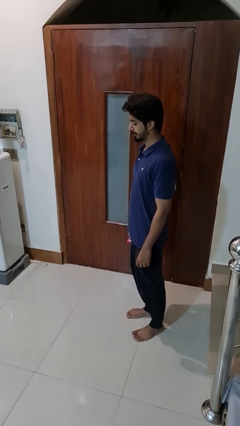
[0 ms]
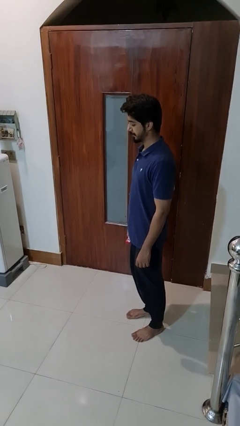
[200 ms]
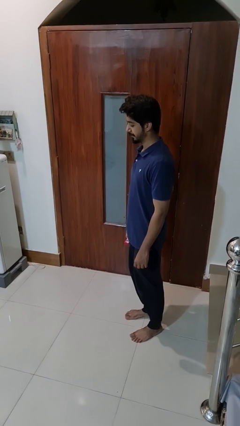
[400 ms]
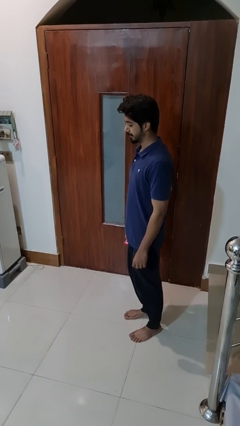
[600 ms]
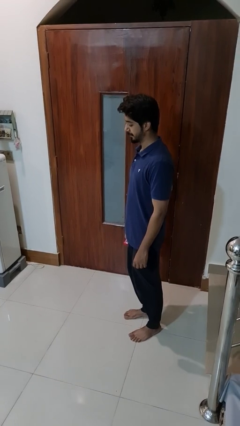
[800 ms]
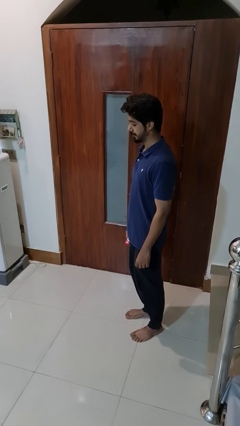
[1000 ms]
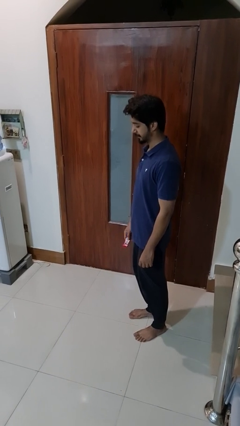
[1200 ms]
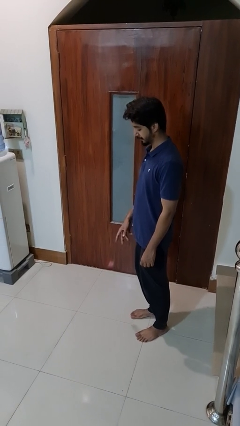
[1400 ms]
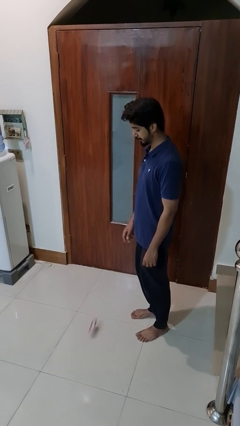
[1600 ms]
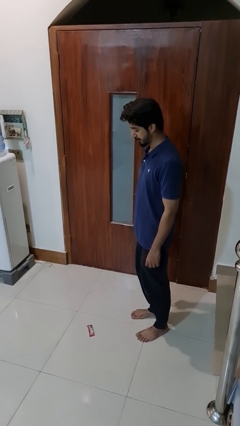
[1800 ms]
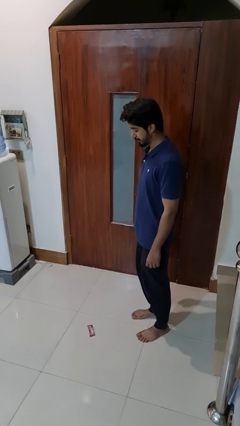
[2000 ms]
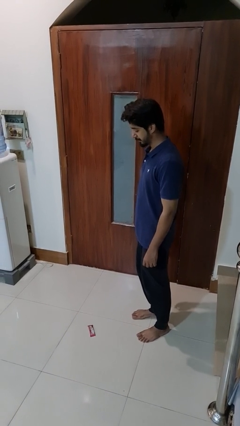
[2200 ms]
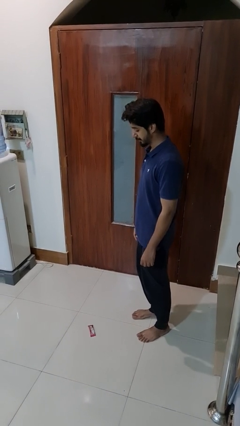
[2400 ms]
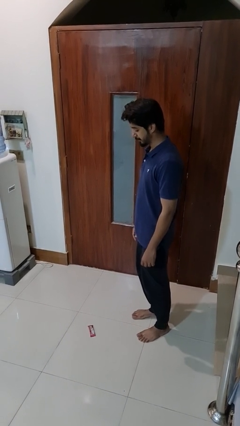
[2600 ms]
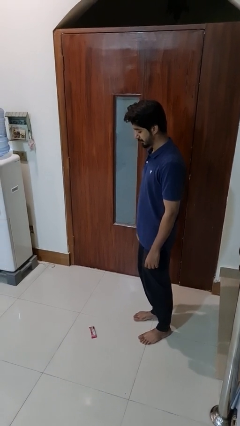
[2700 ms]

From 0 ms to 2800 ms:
person throws object to ground

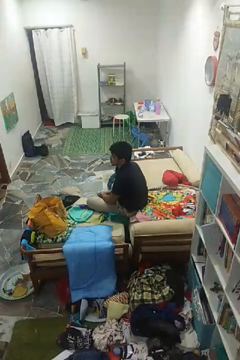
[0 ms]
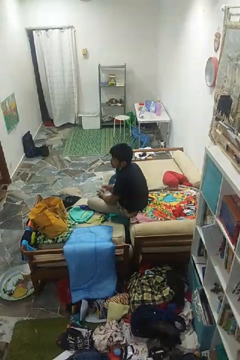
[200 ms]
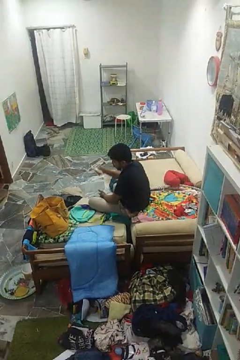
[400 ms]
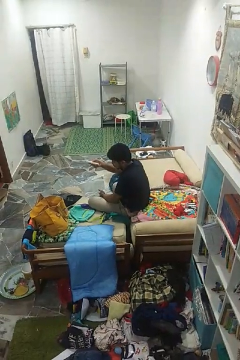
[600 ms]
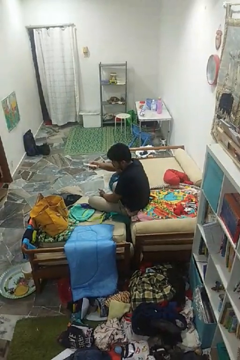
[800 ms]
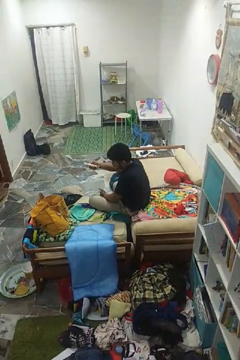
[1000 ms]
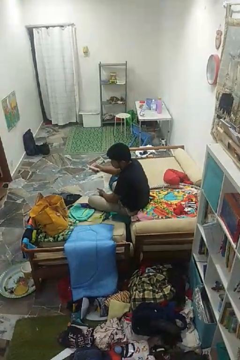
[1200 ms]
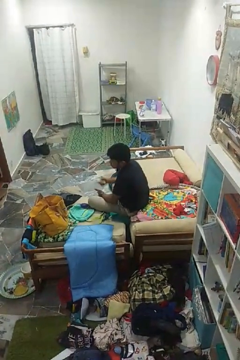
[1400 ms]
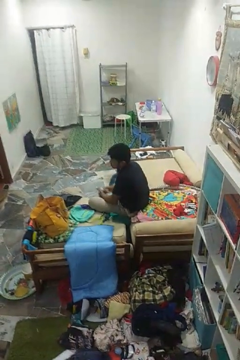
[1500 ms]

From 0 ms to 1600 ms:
person uses television remote

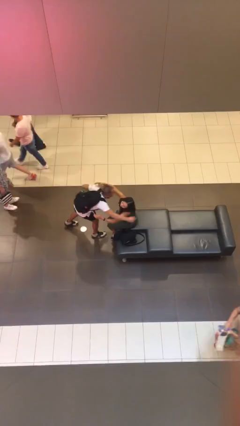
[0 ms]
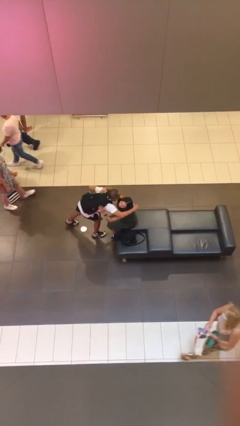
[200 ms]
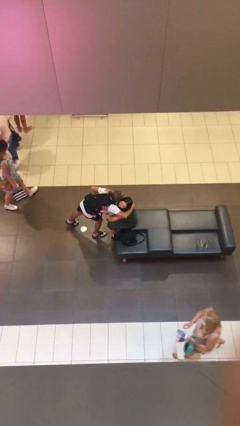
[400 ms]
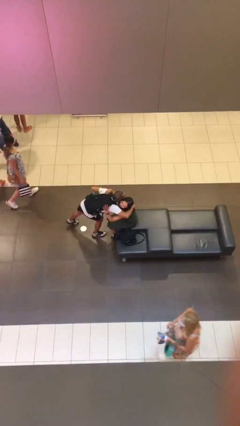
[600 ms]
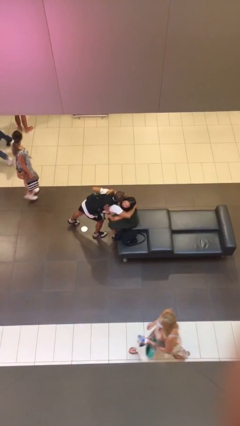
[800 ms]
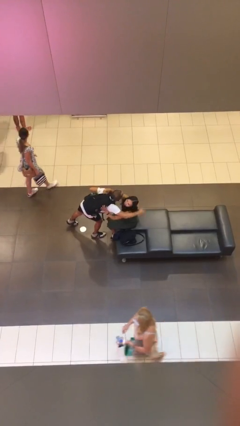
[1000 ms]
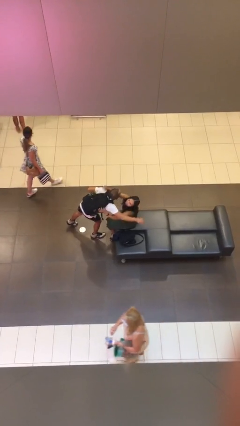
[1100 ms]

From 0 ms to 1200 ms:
person embraces person

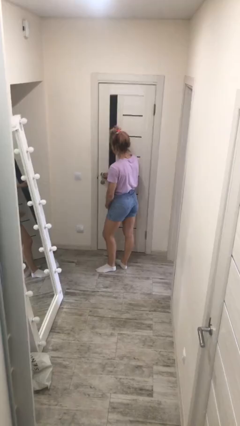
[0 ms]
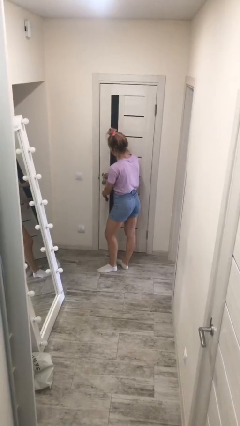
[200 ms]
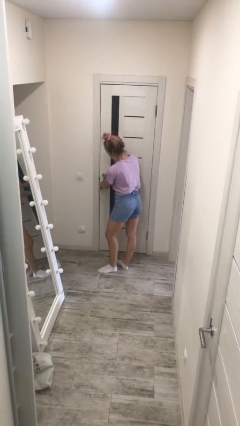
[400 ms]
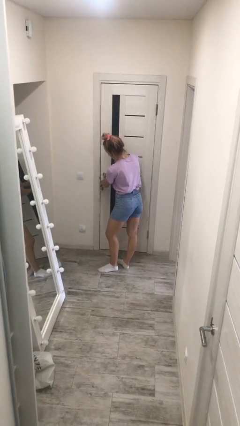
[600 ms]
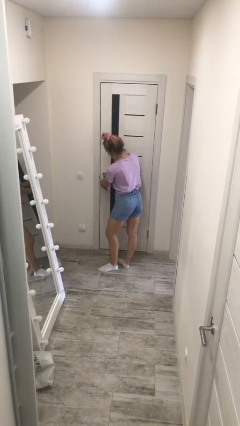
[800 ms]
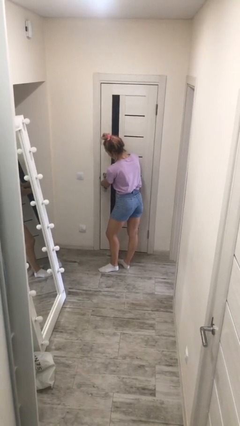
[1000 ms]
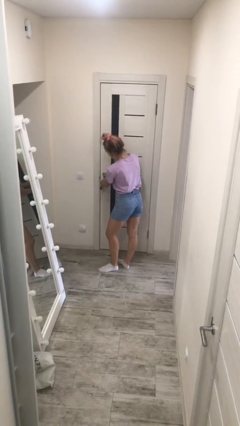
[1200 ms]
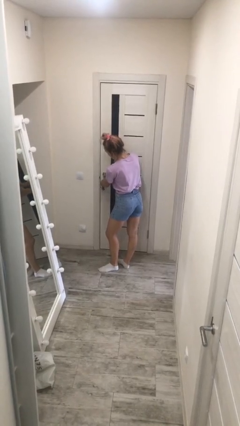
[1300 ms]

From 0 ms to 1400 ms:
person unlocks door with keys

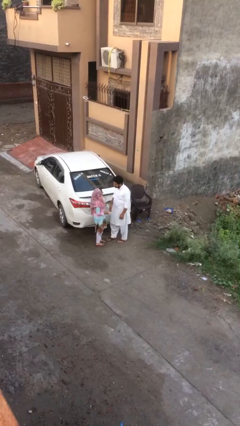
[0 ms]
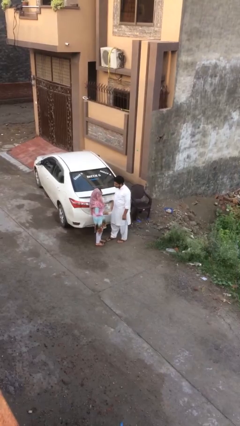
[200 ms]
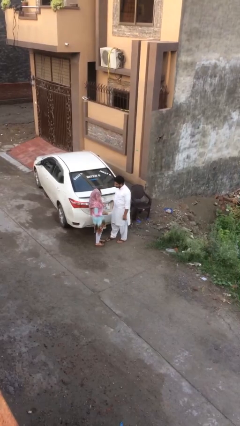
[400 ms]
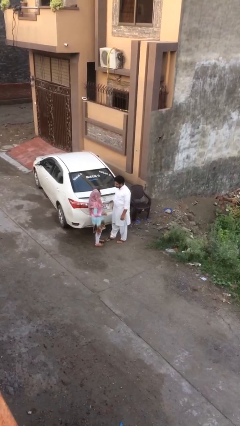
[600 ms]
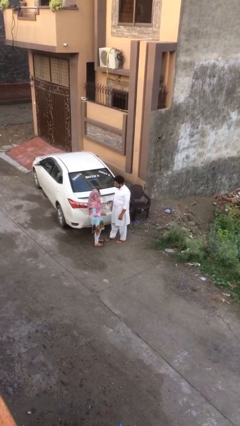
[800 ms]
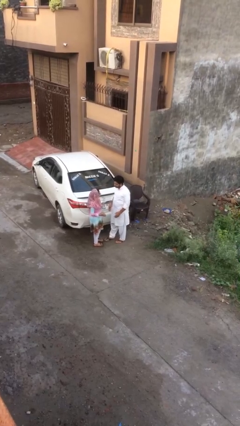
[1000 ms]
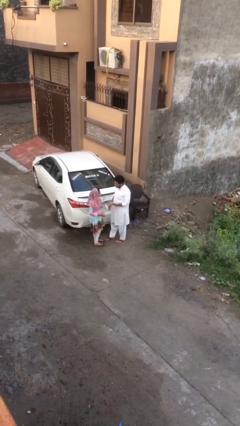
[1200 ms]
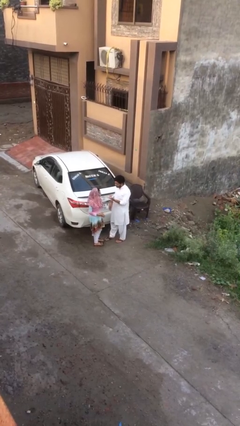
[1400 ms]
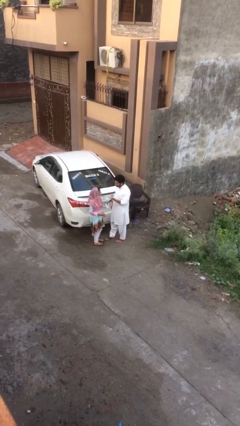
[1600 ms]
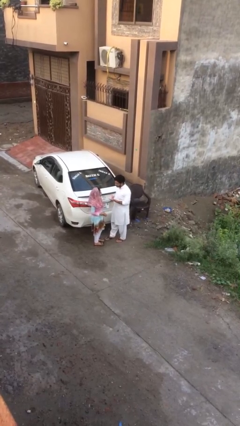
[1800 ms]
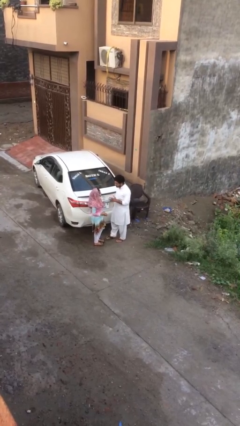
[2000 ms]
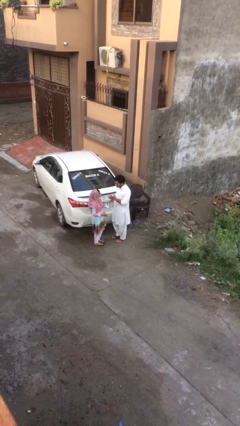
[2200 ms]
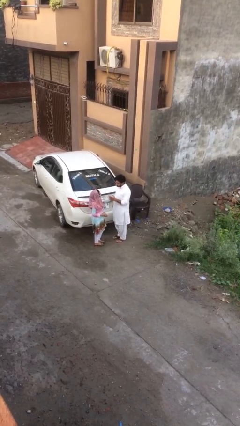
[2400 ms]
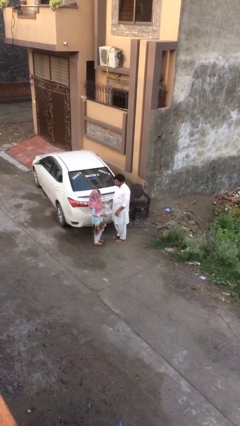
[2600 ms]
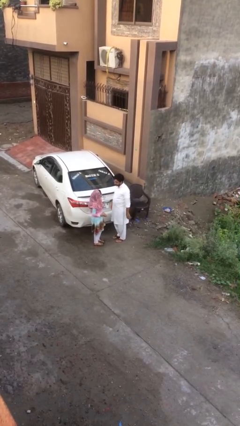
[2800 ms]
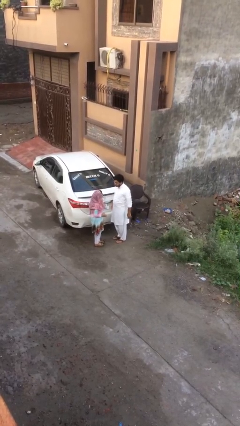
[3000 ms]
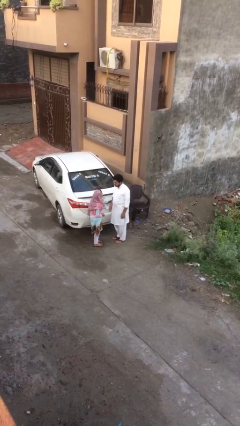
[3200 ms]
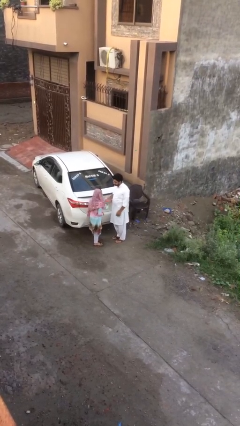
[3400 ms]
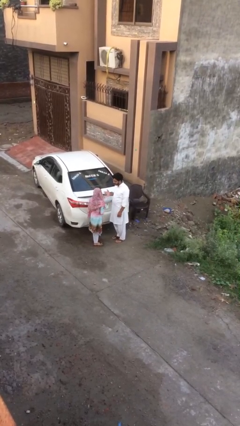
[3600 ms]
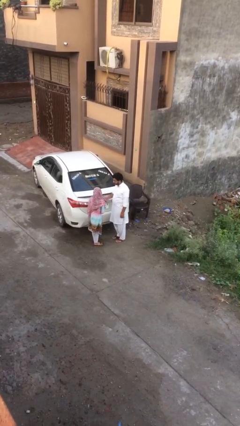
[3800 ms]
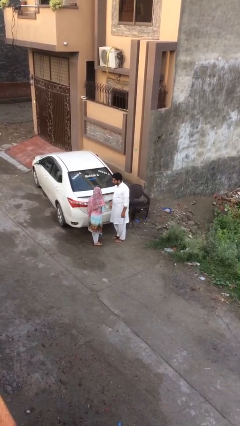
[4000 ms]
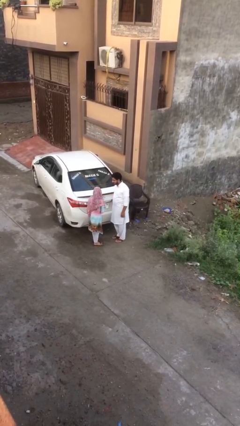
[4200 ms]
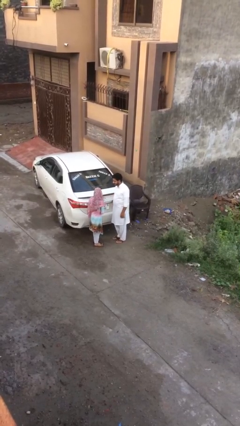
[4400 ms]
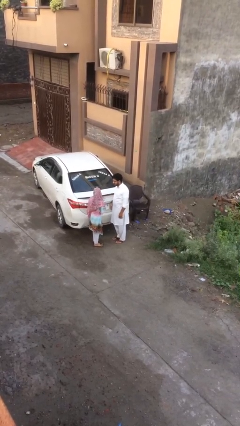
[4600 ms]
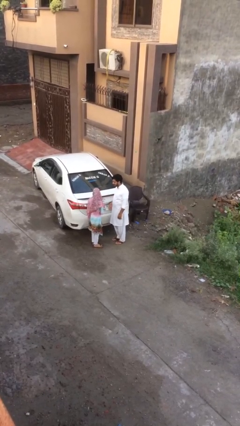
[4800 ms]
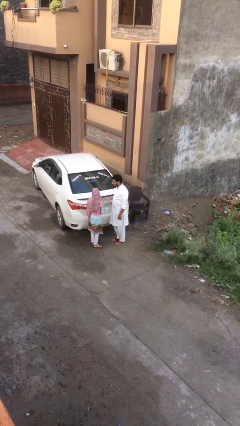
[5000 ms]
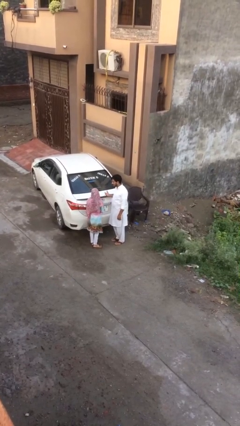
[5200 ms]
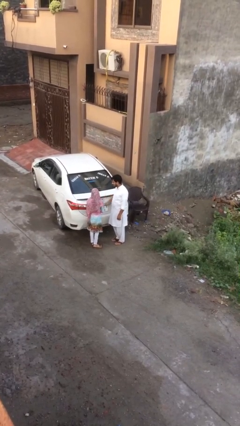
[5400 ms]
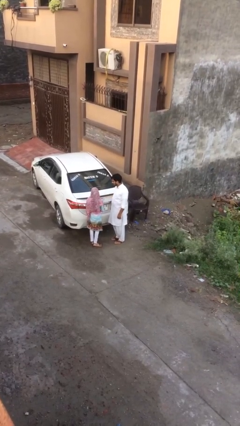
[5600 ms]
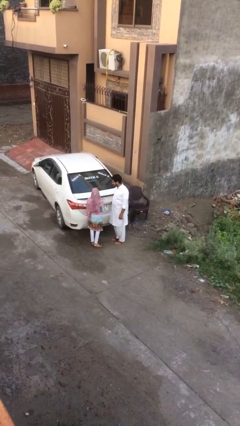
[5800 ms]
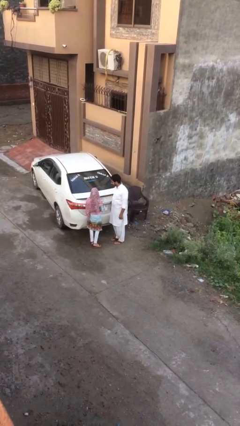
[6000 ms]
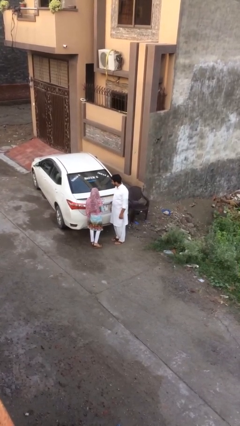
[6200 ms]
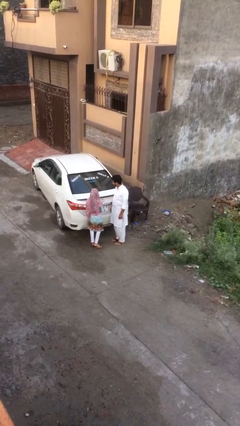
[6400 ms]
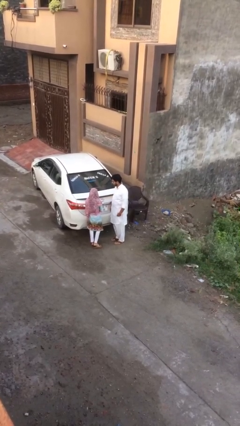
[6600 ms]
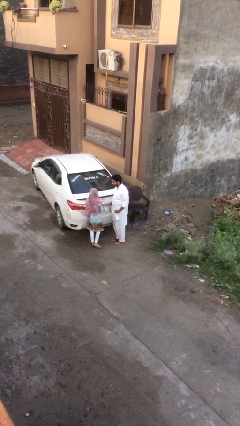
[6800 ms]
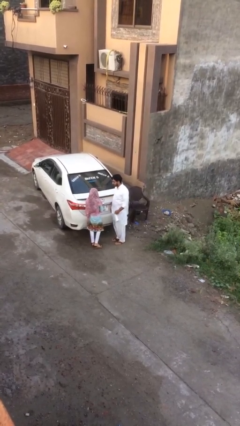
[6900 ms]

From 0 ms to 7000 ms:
person talks to person

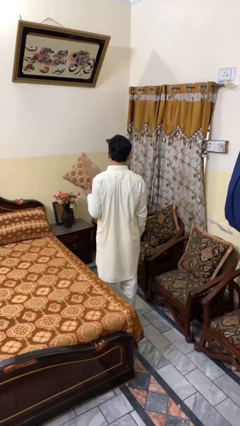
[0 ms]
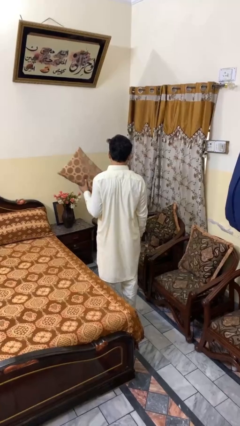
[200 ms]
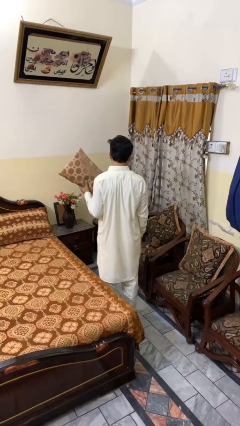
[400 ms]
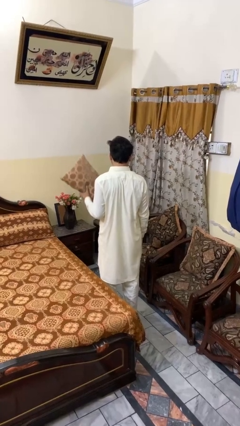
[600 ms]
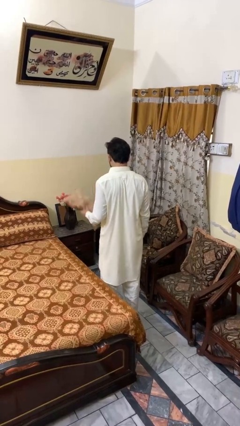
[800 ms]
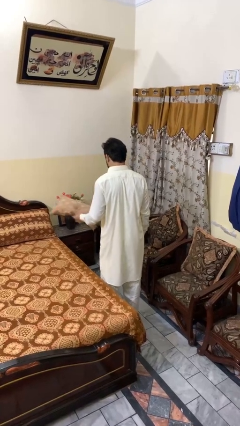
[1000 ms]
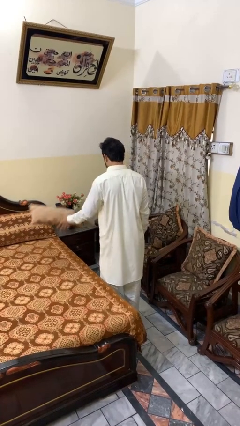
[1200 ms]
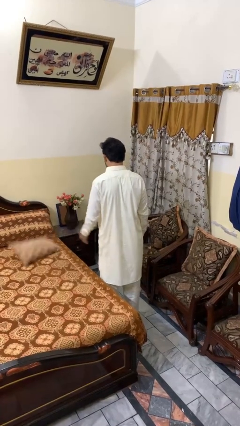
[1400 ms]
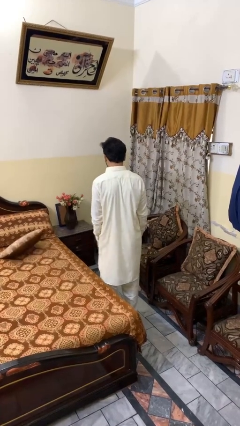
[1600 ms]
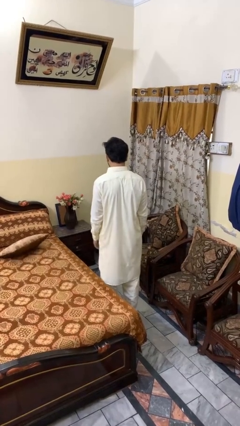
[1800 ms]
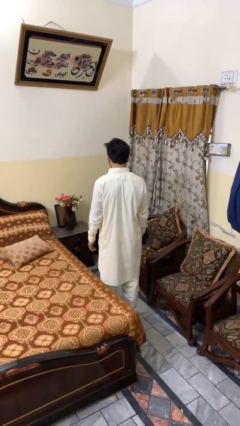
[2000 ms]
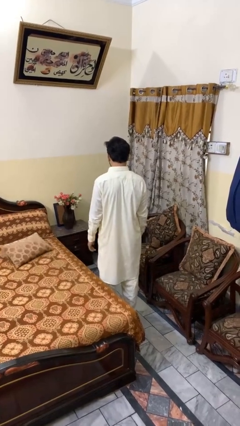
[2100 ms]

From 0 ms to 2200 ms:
person throws object on bed

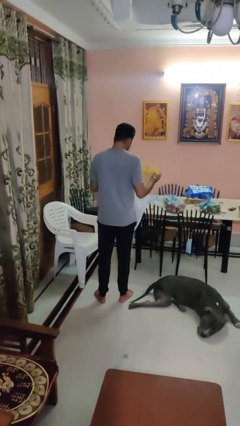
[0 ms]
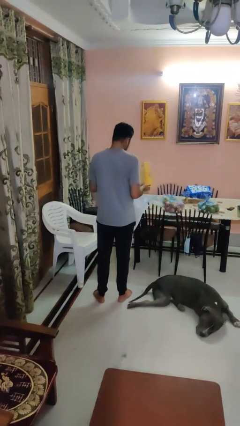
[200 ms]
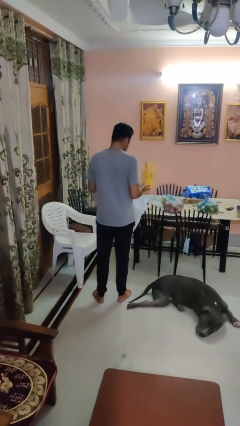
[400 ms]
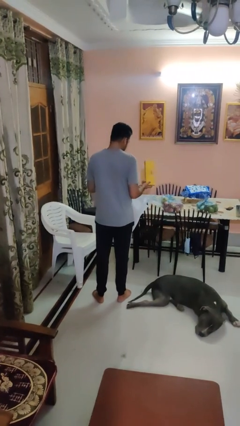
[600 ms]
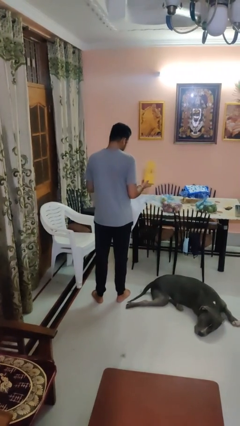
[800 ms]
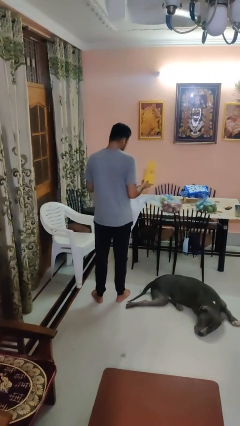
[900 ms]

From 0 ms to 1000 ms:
person takes object from bag
